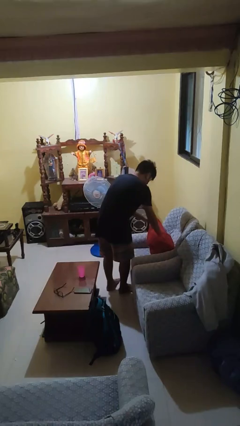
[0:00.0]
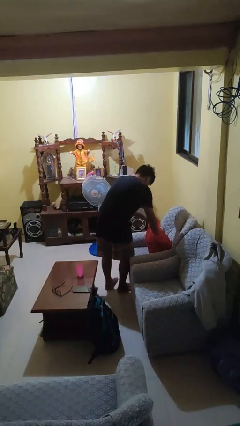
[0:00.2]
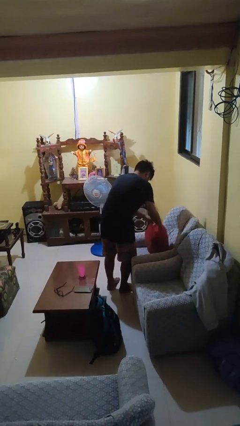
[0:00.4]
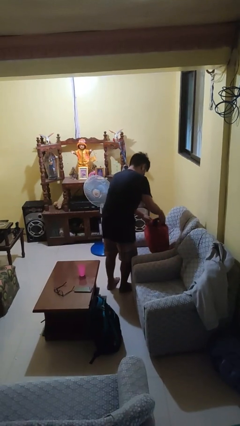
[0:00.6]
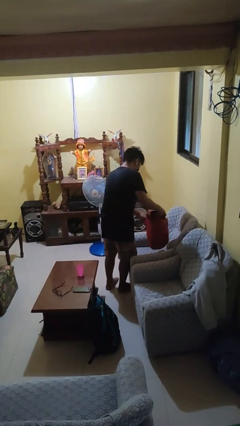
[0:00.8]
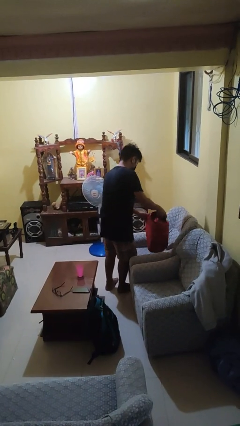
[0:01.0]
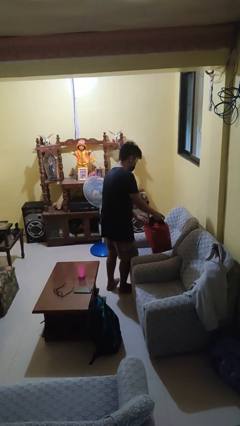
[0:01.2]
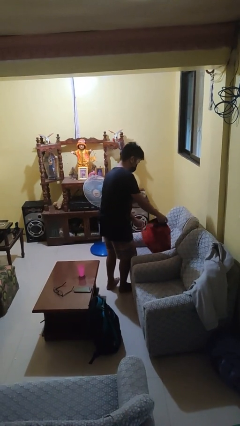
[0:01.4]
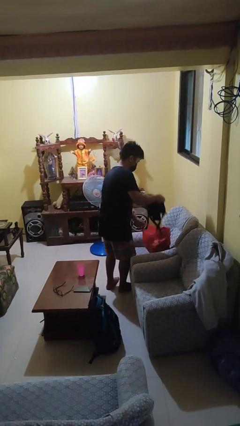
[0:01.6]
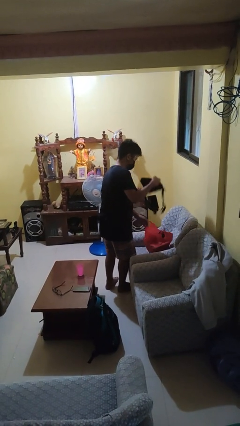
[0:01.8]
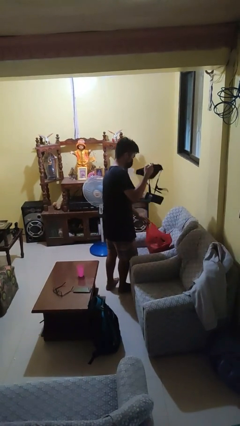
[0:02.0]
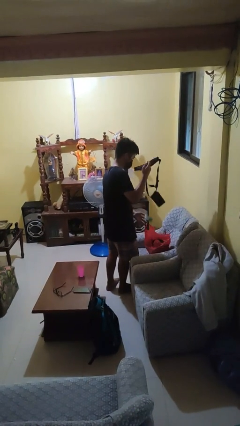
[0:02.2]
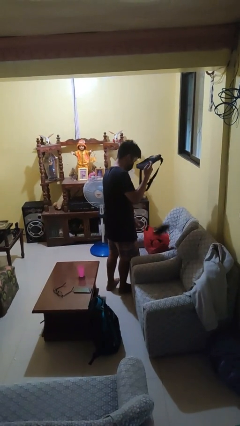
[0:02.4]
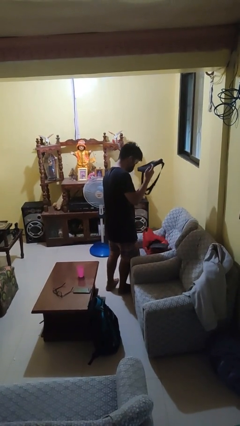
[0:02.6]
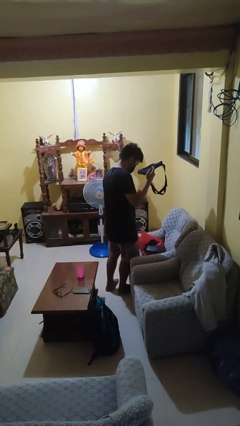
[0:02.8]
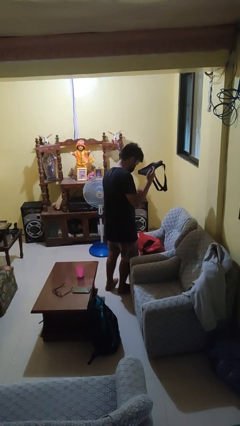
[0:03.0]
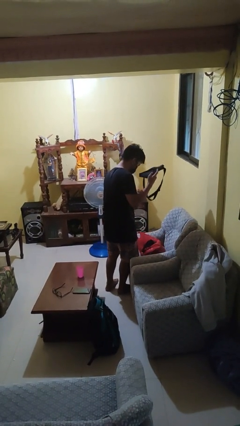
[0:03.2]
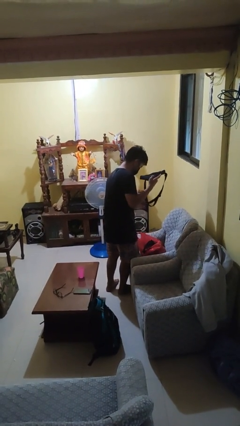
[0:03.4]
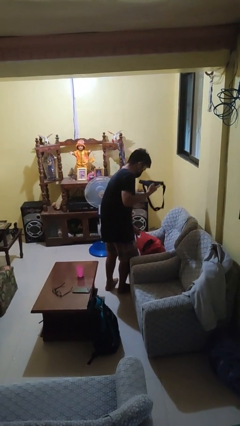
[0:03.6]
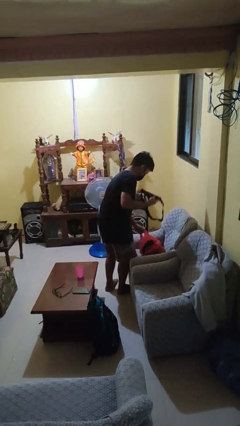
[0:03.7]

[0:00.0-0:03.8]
person takes object from bag

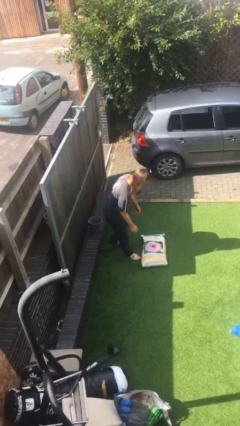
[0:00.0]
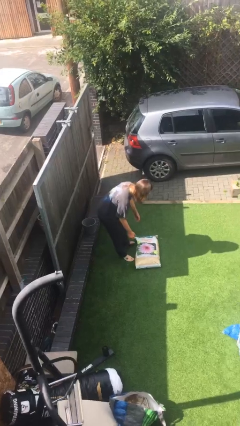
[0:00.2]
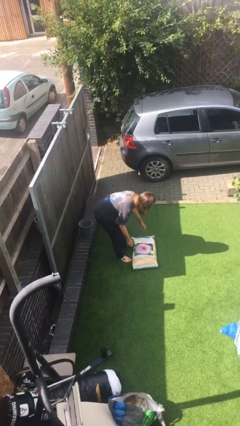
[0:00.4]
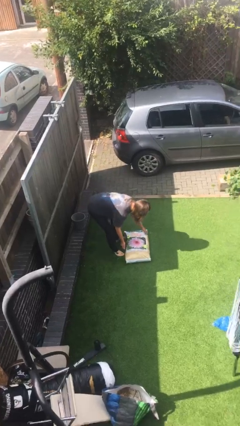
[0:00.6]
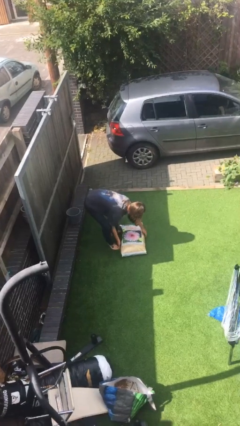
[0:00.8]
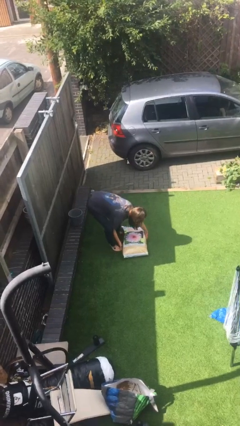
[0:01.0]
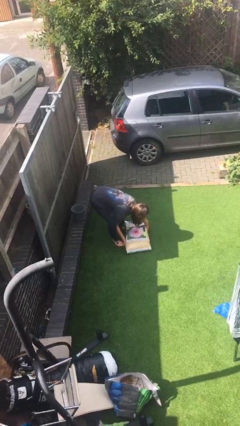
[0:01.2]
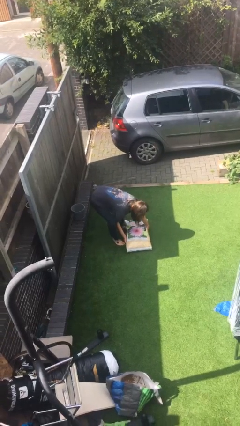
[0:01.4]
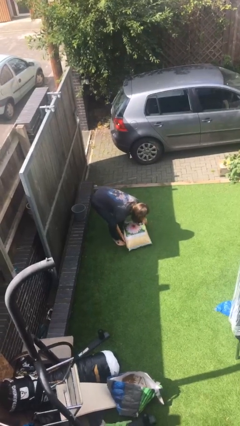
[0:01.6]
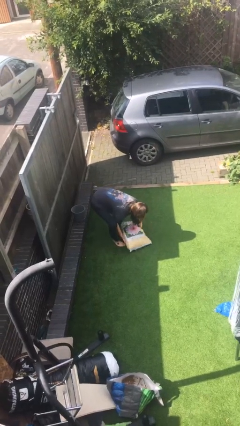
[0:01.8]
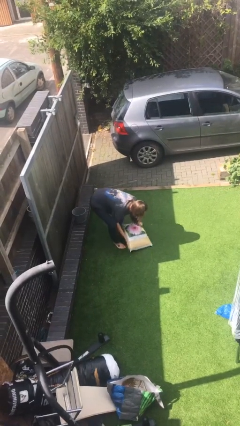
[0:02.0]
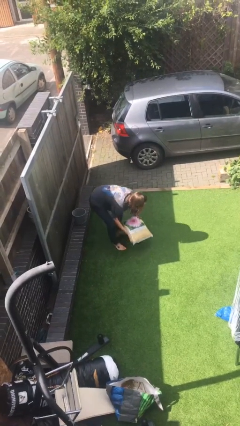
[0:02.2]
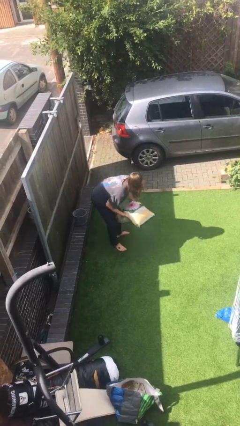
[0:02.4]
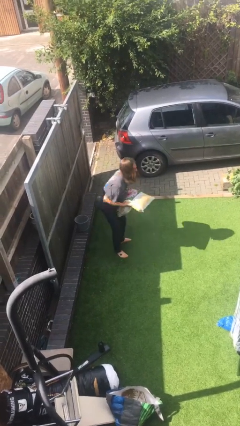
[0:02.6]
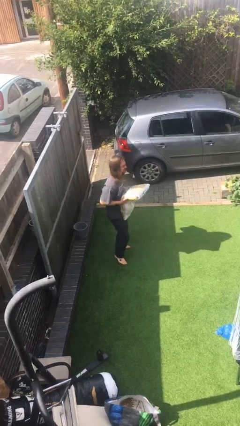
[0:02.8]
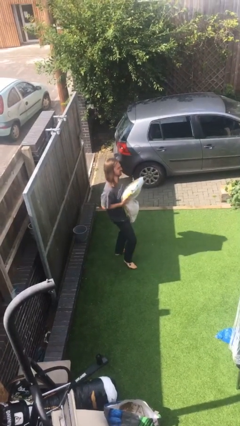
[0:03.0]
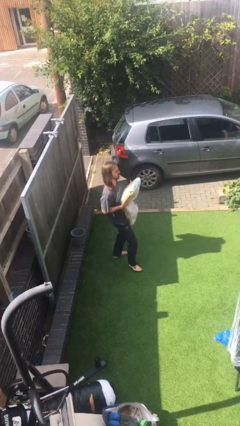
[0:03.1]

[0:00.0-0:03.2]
person picks up object from floor

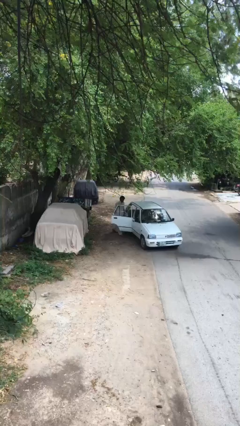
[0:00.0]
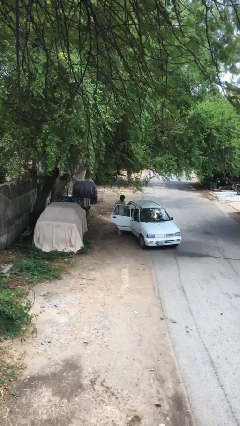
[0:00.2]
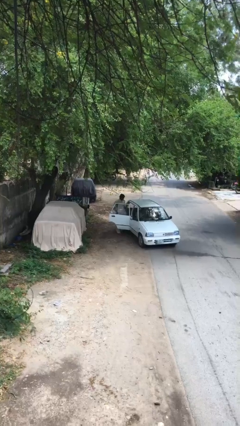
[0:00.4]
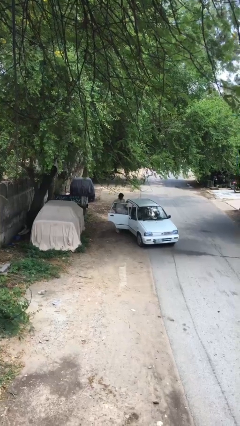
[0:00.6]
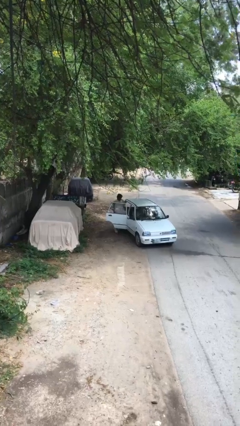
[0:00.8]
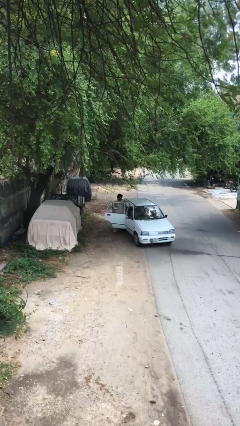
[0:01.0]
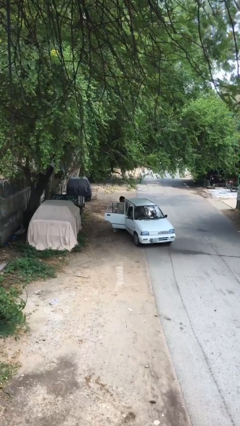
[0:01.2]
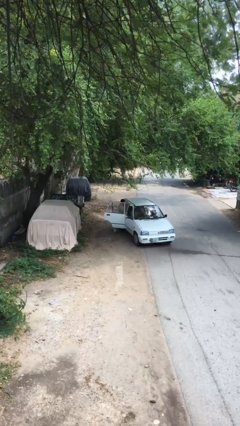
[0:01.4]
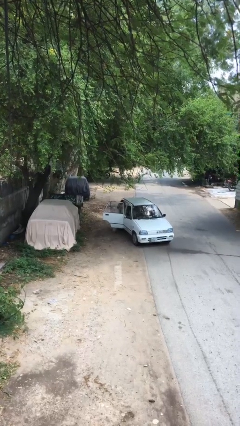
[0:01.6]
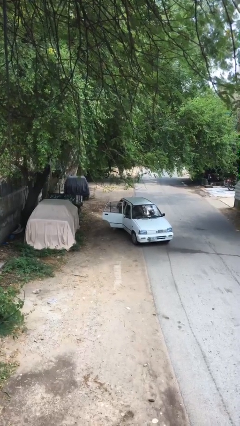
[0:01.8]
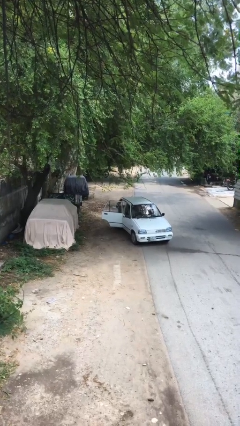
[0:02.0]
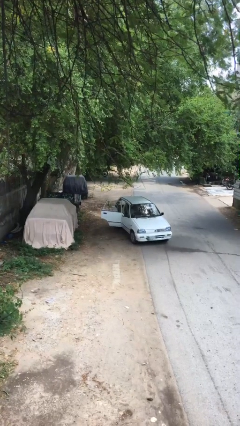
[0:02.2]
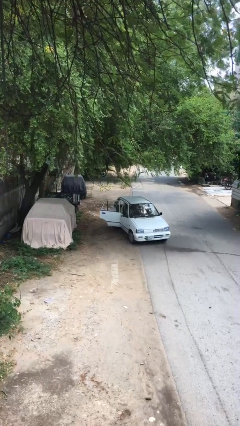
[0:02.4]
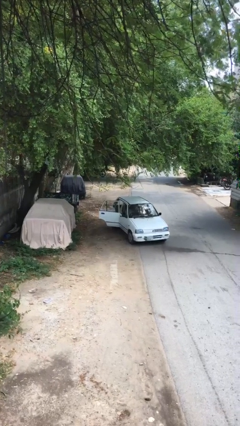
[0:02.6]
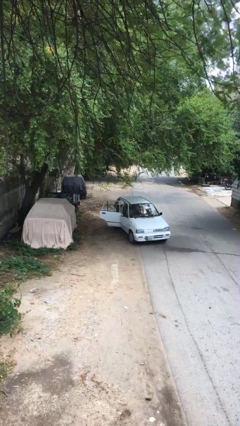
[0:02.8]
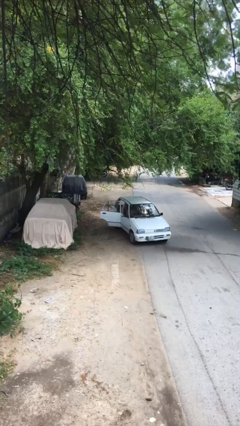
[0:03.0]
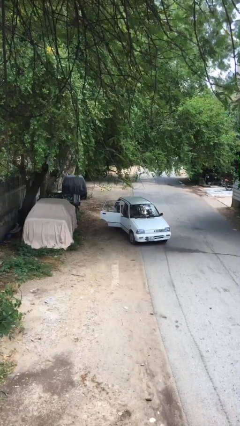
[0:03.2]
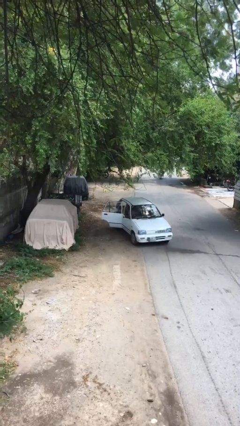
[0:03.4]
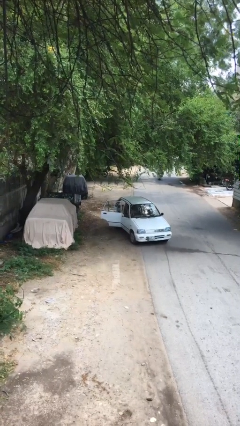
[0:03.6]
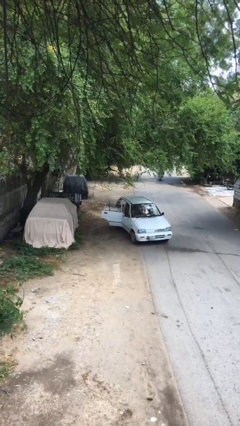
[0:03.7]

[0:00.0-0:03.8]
person enters car

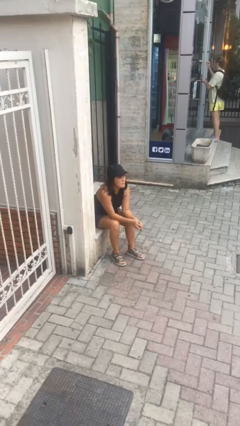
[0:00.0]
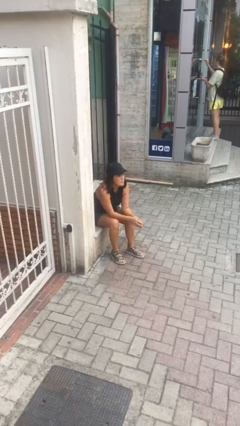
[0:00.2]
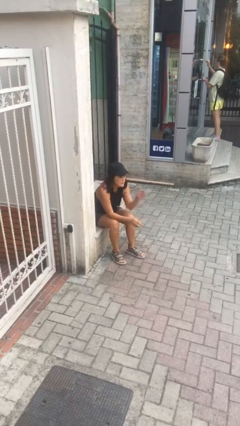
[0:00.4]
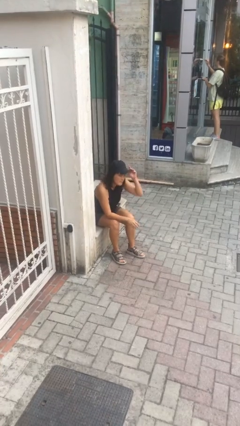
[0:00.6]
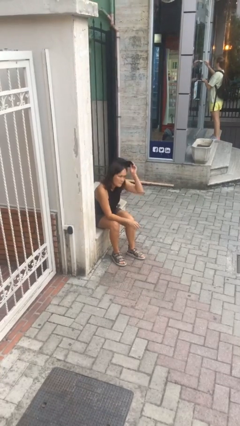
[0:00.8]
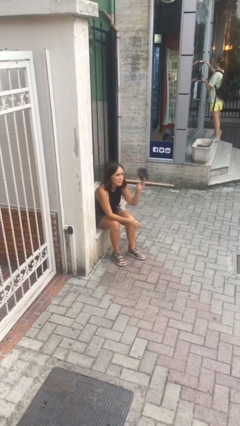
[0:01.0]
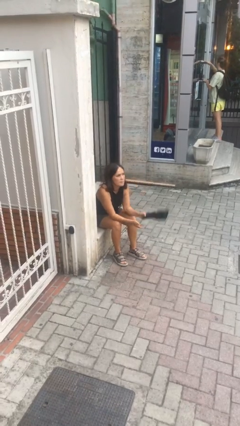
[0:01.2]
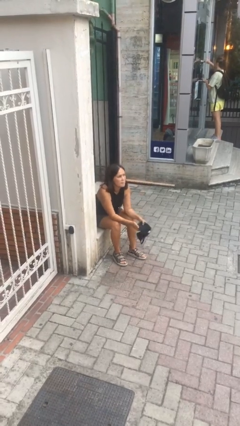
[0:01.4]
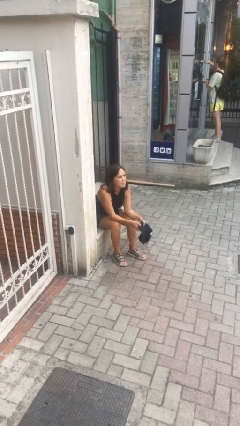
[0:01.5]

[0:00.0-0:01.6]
person takes off hat

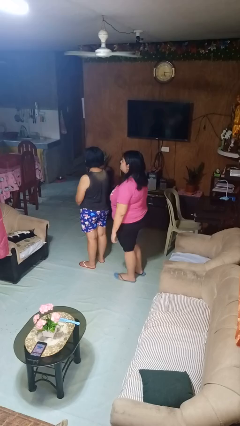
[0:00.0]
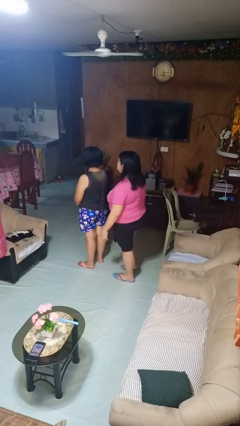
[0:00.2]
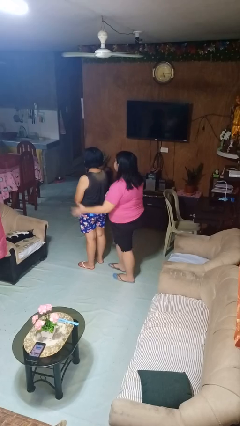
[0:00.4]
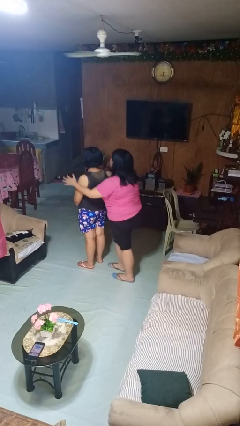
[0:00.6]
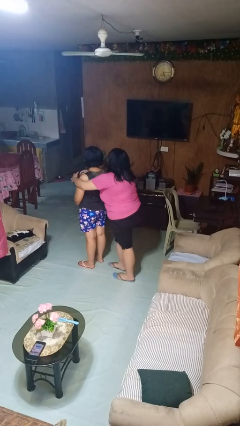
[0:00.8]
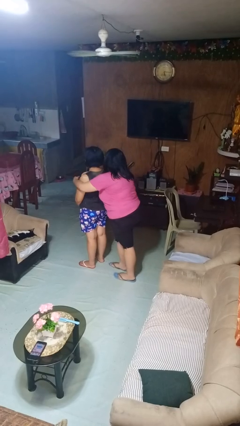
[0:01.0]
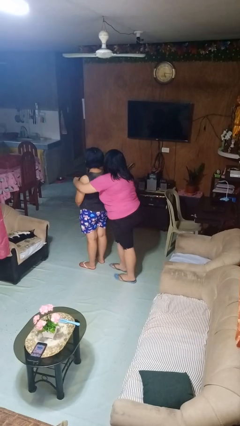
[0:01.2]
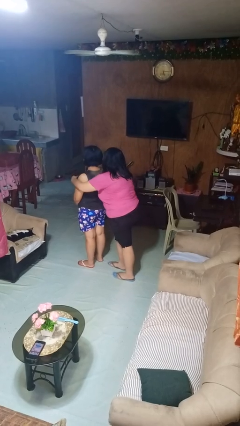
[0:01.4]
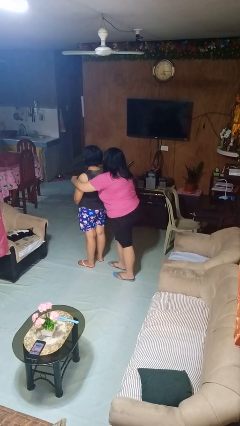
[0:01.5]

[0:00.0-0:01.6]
person hugs person from behind

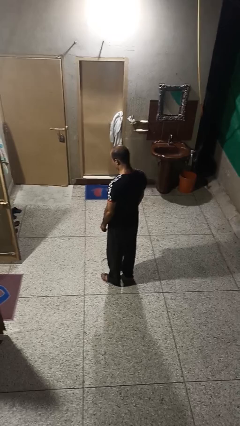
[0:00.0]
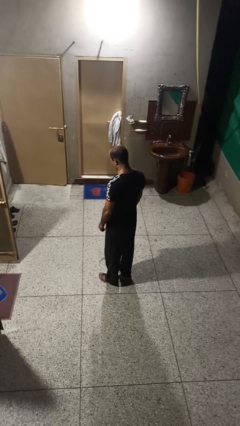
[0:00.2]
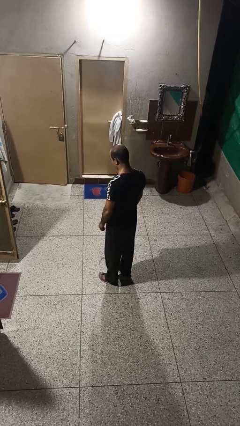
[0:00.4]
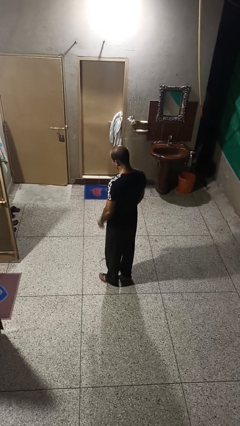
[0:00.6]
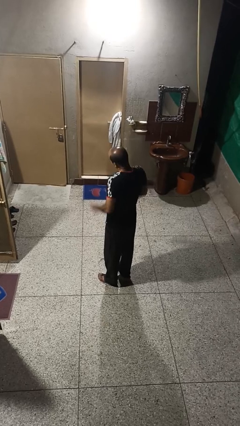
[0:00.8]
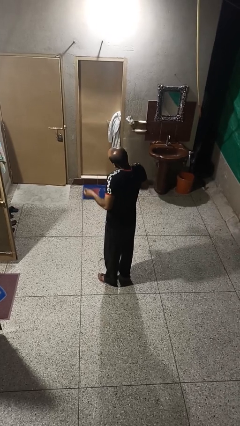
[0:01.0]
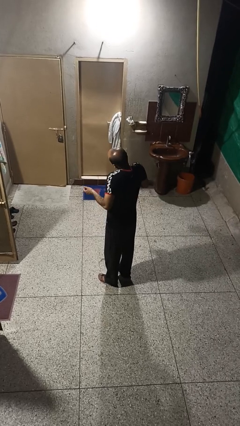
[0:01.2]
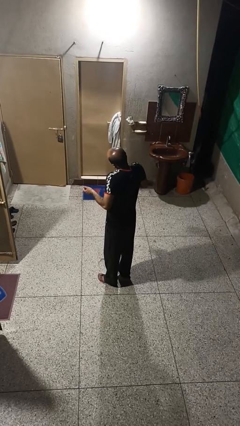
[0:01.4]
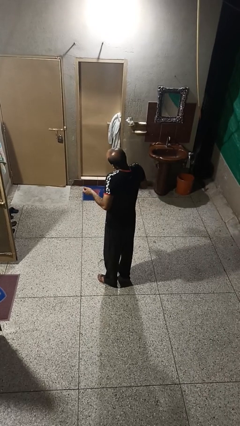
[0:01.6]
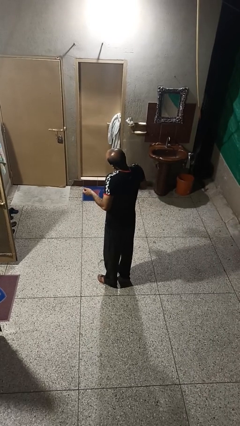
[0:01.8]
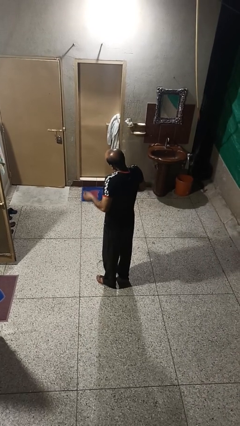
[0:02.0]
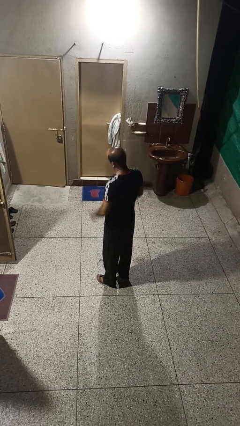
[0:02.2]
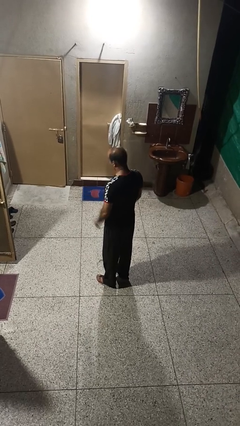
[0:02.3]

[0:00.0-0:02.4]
person shrugs

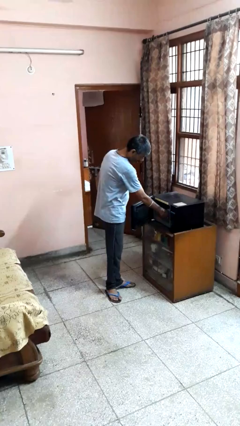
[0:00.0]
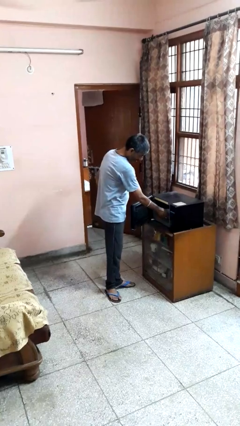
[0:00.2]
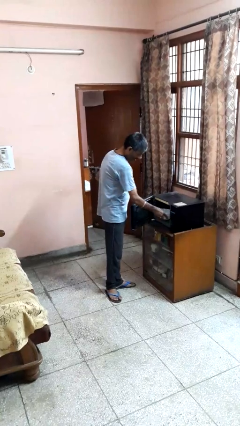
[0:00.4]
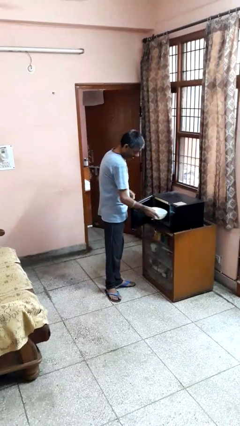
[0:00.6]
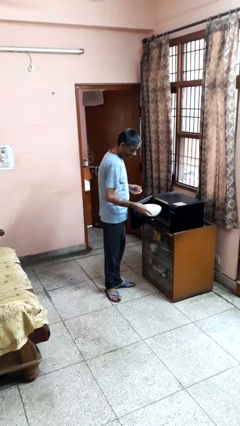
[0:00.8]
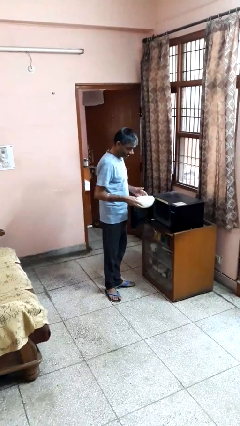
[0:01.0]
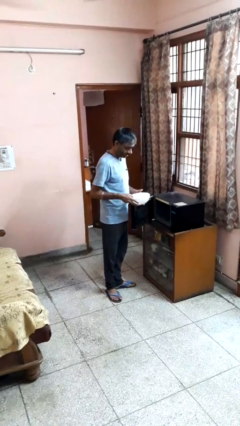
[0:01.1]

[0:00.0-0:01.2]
person takes object from microwave
